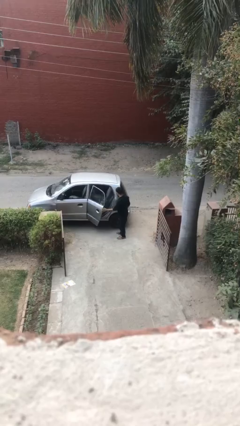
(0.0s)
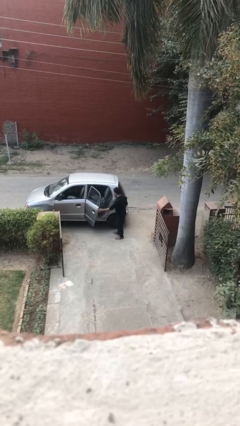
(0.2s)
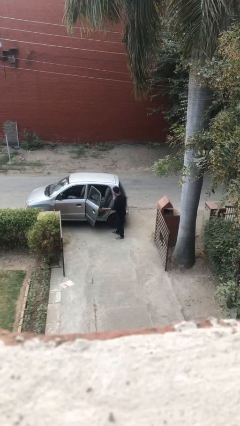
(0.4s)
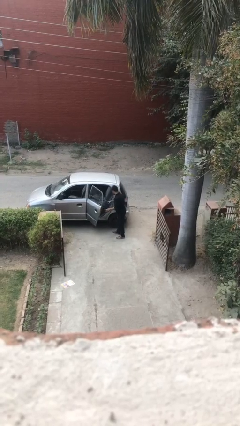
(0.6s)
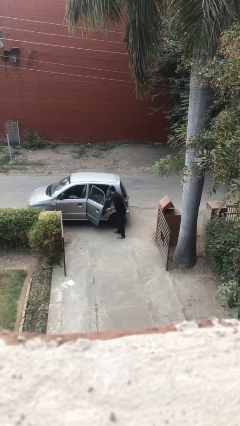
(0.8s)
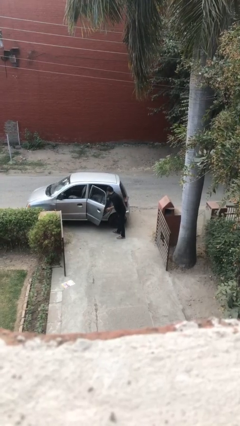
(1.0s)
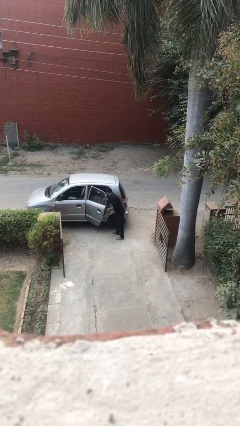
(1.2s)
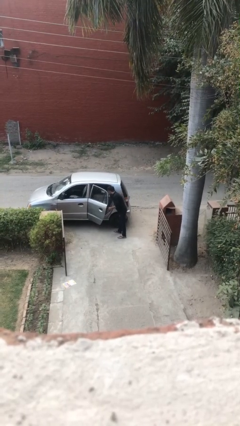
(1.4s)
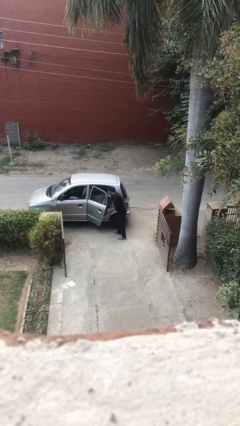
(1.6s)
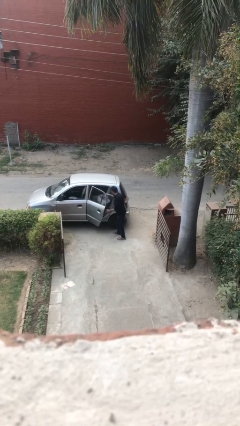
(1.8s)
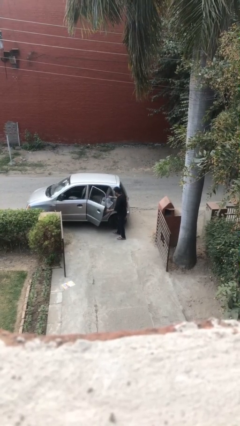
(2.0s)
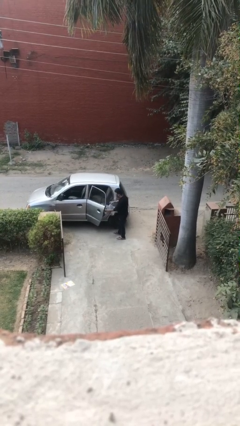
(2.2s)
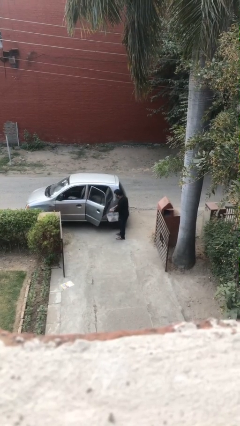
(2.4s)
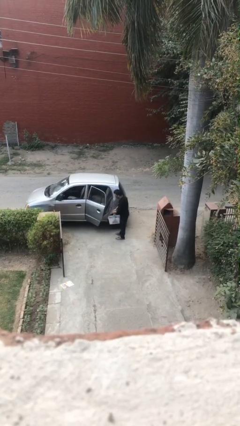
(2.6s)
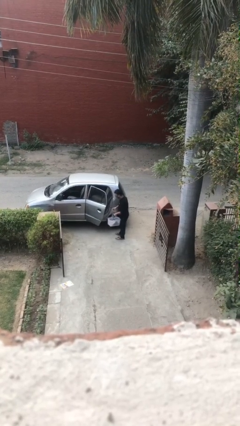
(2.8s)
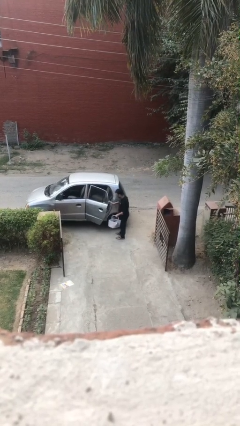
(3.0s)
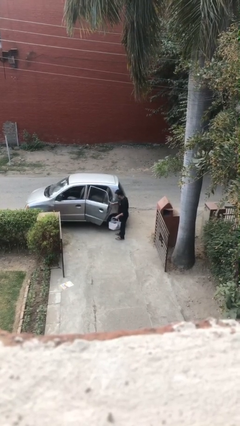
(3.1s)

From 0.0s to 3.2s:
person unloads car

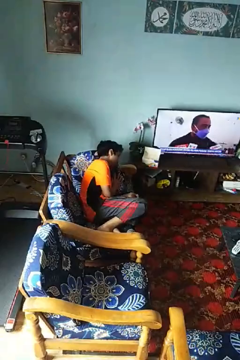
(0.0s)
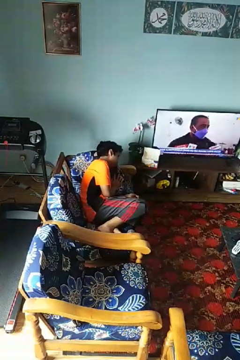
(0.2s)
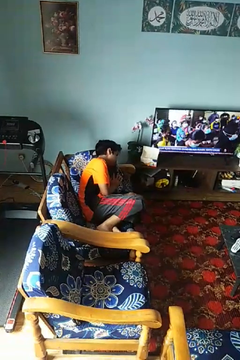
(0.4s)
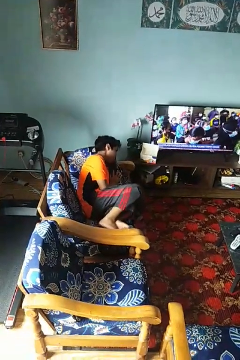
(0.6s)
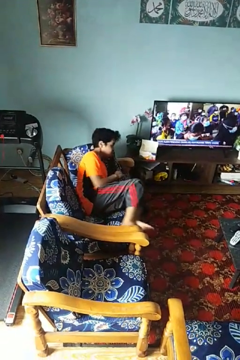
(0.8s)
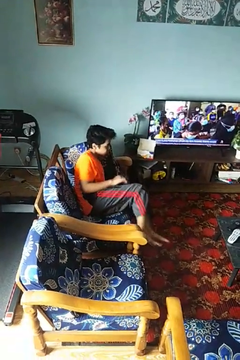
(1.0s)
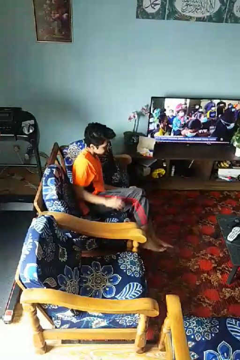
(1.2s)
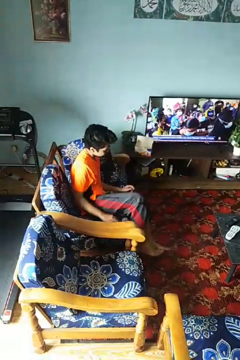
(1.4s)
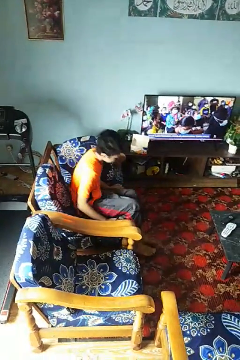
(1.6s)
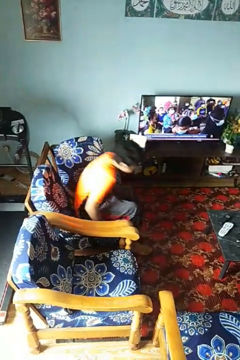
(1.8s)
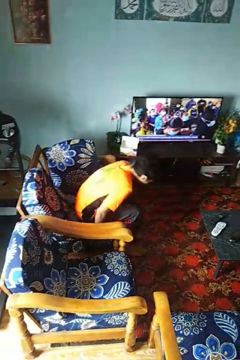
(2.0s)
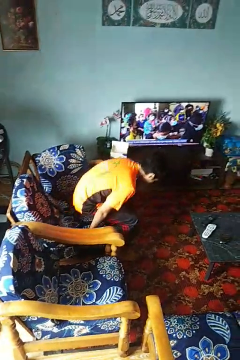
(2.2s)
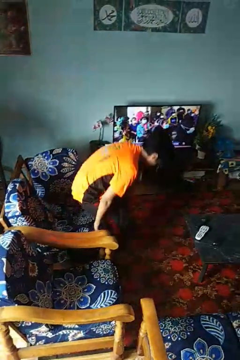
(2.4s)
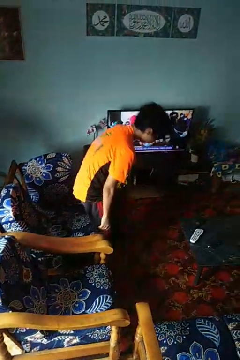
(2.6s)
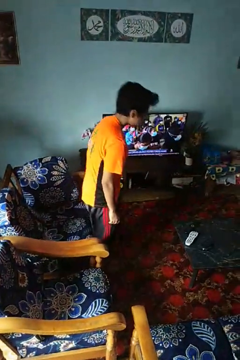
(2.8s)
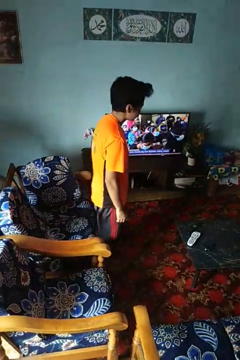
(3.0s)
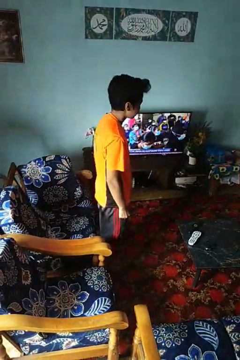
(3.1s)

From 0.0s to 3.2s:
person stands up

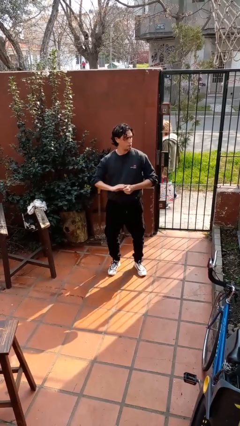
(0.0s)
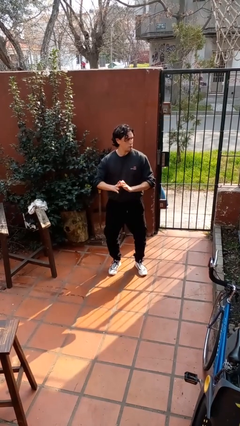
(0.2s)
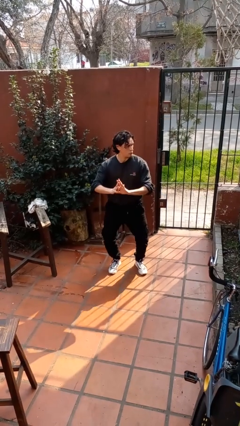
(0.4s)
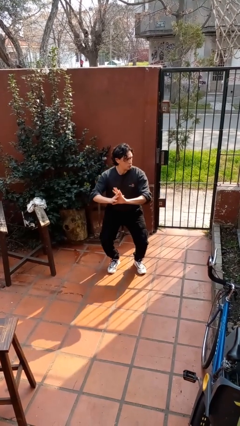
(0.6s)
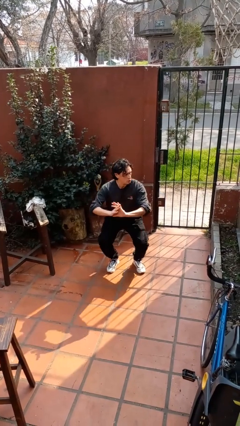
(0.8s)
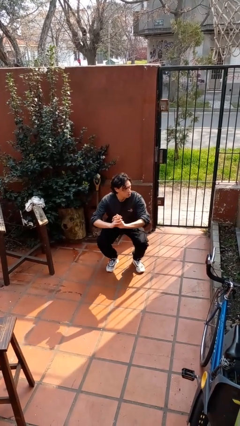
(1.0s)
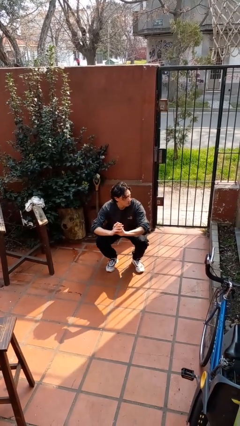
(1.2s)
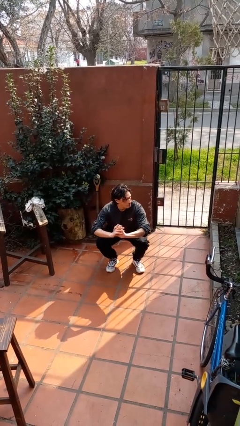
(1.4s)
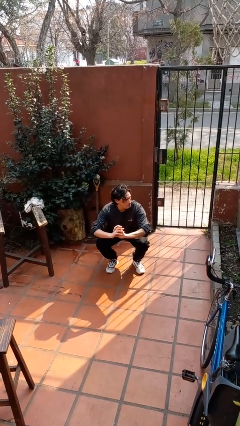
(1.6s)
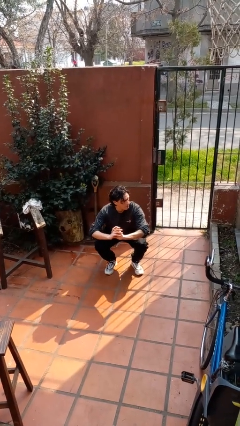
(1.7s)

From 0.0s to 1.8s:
person squats

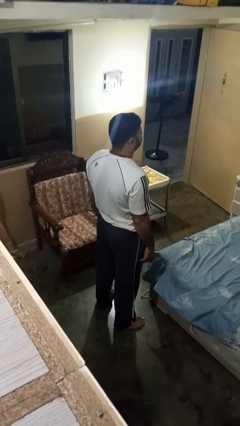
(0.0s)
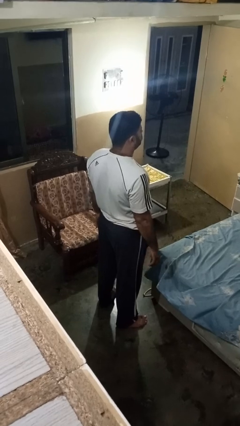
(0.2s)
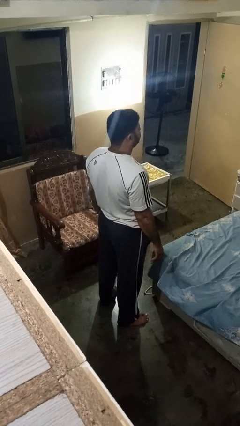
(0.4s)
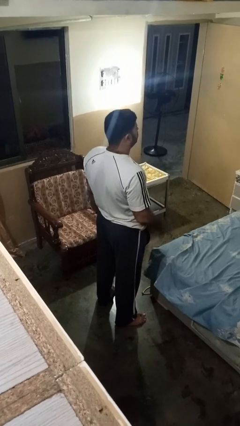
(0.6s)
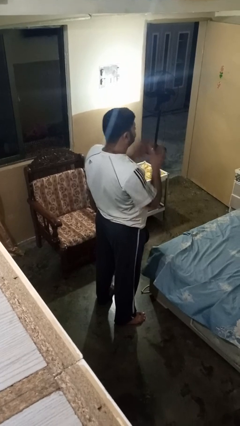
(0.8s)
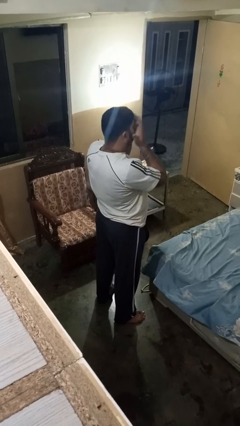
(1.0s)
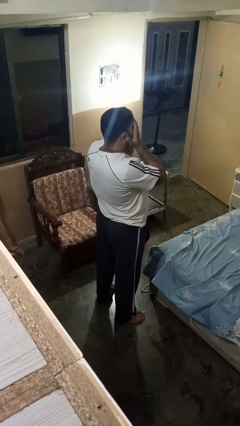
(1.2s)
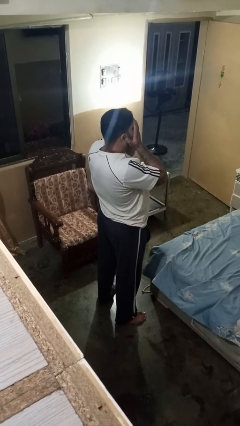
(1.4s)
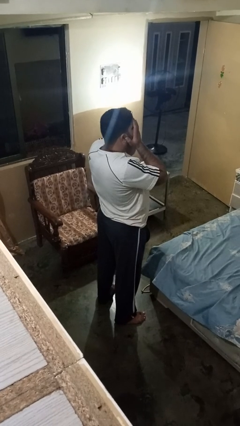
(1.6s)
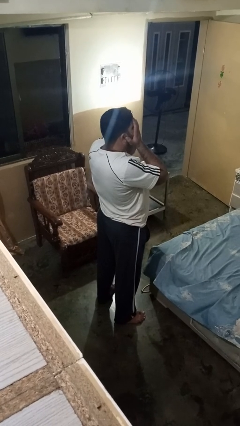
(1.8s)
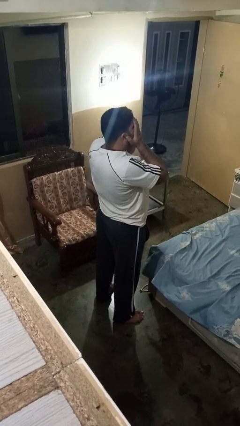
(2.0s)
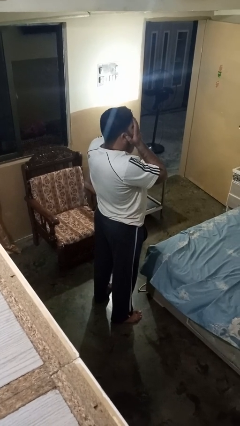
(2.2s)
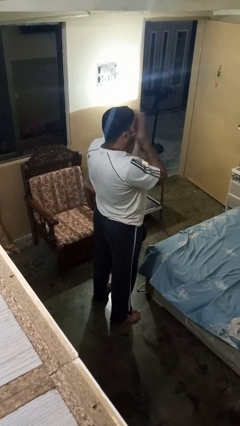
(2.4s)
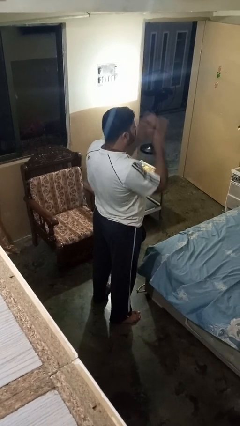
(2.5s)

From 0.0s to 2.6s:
person covers face with hands

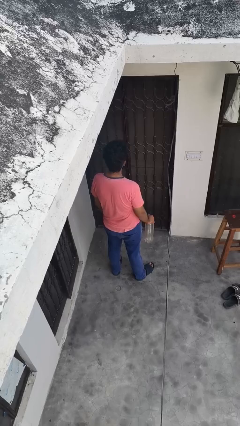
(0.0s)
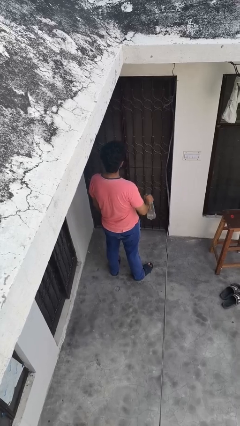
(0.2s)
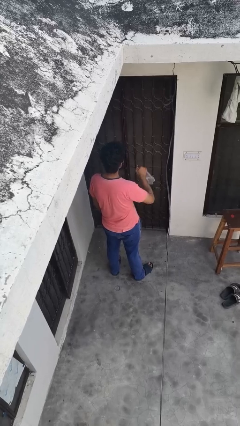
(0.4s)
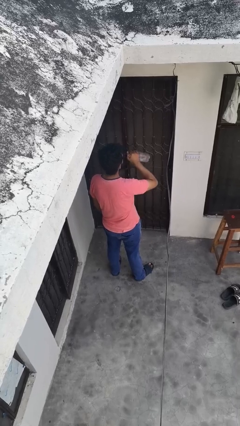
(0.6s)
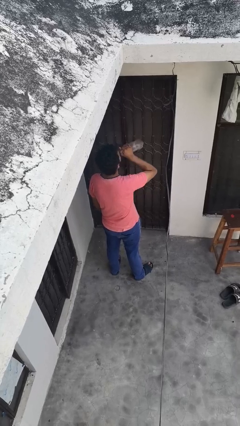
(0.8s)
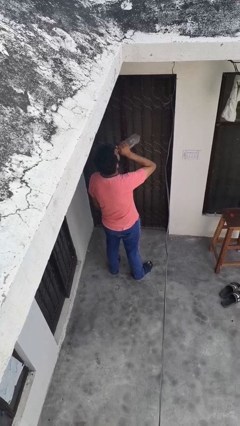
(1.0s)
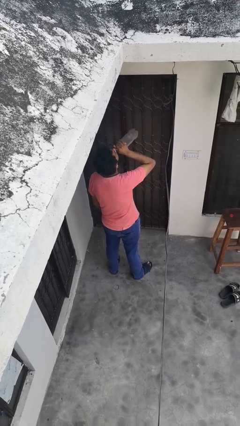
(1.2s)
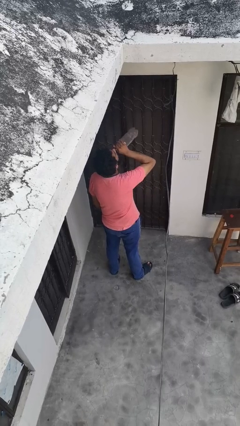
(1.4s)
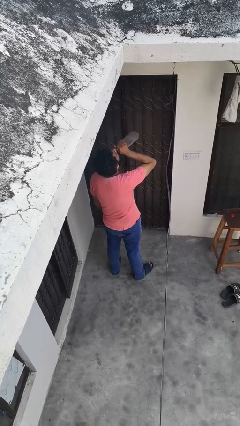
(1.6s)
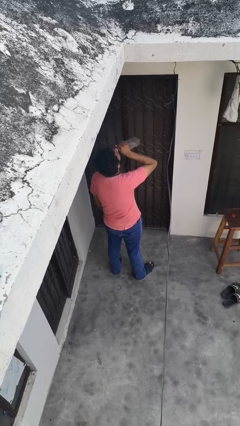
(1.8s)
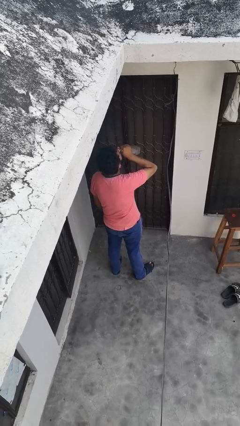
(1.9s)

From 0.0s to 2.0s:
person drinks from bottle

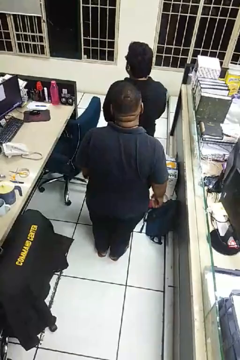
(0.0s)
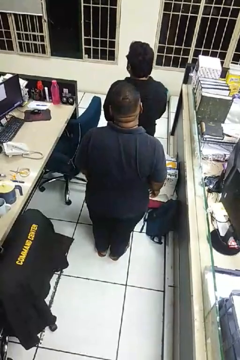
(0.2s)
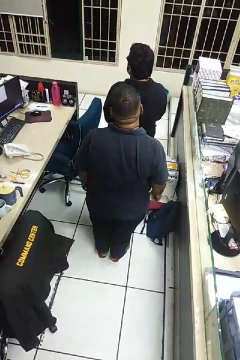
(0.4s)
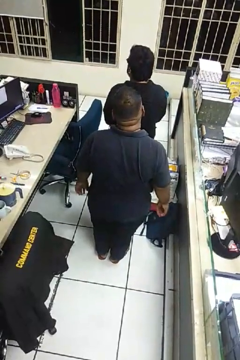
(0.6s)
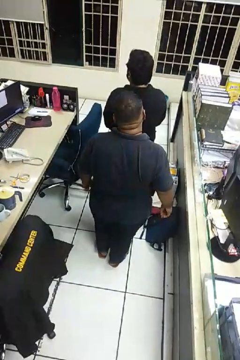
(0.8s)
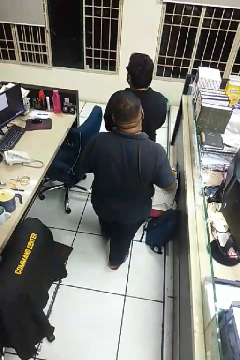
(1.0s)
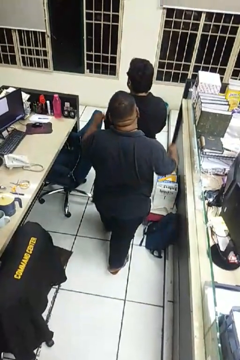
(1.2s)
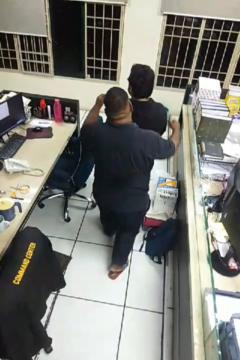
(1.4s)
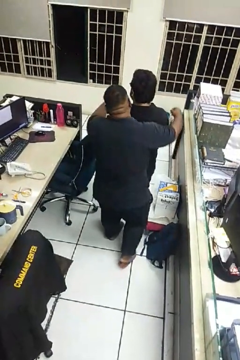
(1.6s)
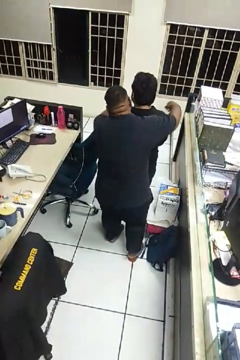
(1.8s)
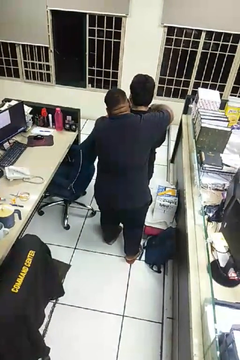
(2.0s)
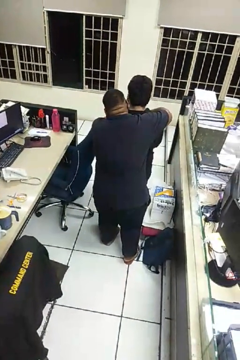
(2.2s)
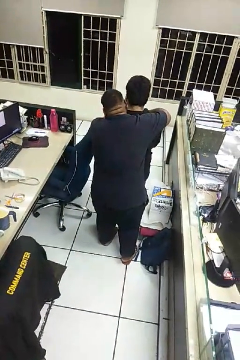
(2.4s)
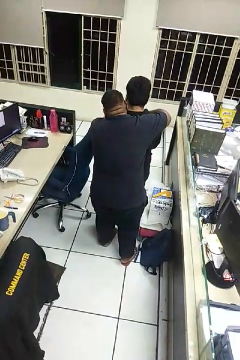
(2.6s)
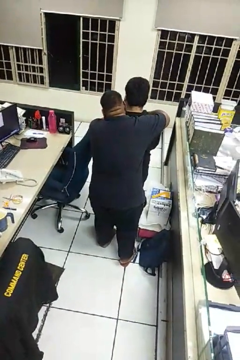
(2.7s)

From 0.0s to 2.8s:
person hugs person from behind

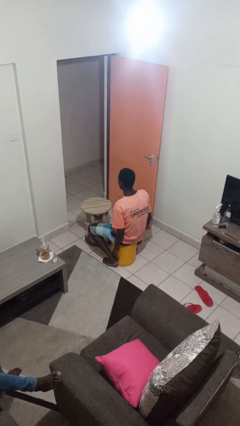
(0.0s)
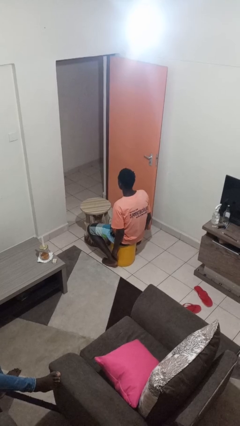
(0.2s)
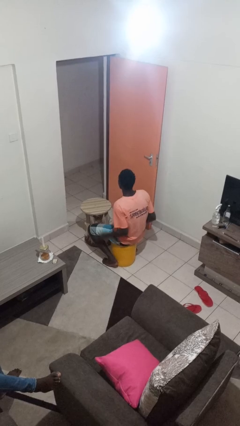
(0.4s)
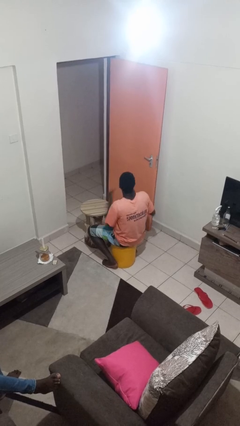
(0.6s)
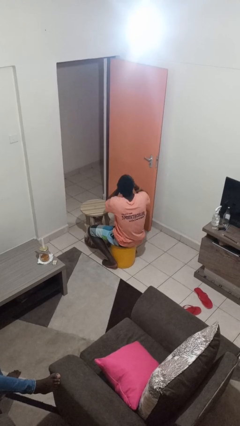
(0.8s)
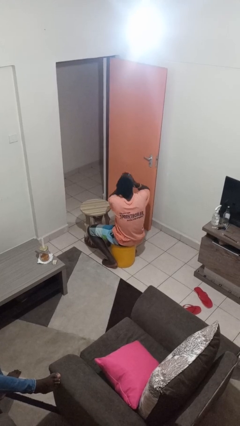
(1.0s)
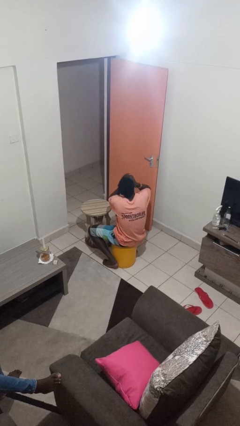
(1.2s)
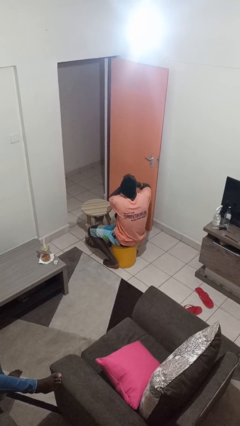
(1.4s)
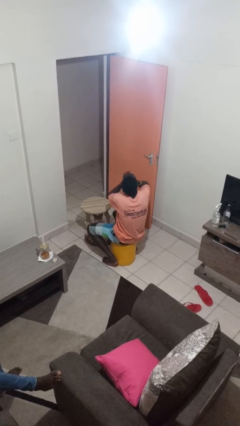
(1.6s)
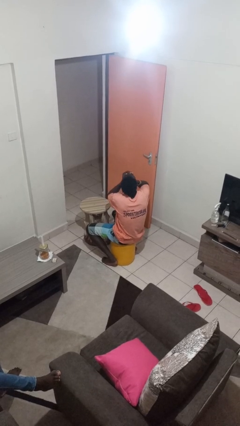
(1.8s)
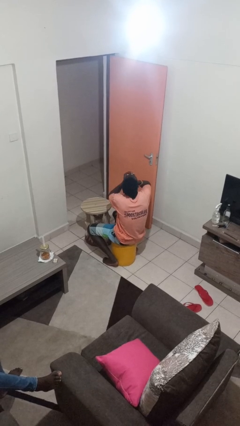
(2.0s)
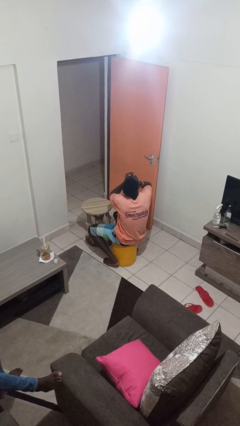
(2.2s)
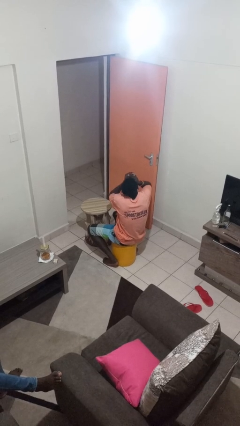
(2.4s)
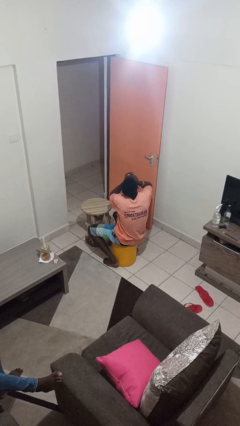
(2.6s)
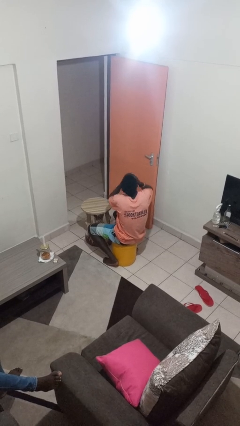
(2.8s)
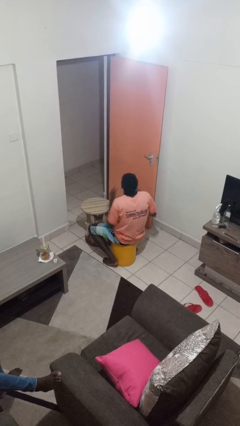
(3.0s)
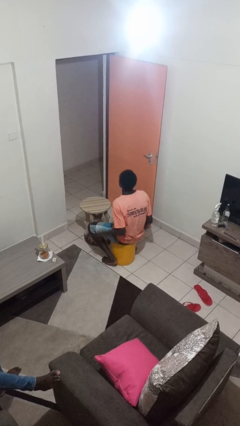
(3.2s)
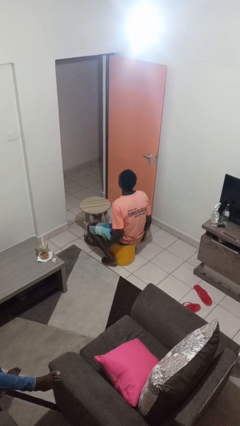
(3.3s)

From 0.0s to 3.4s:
person yawns
